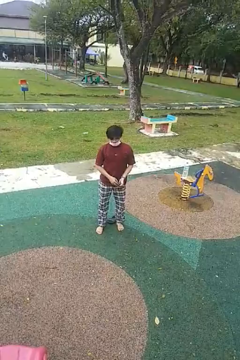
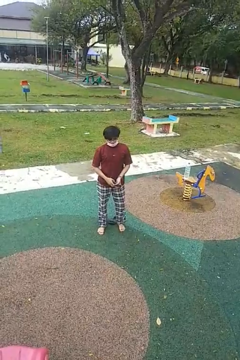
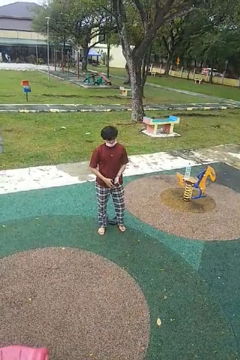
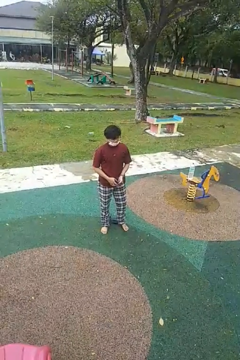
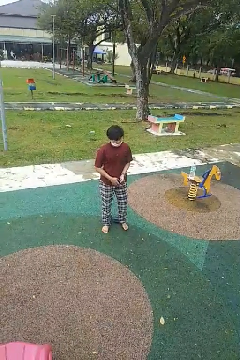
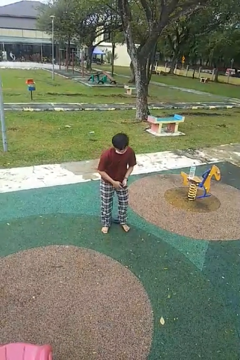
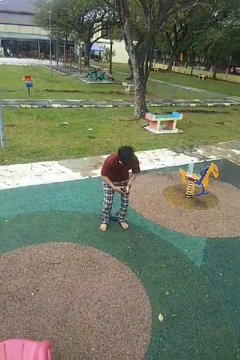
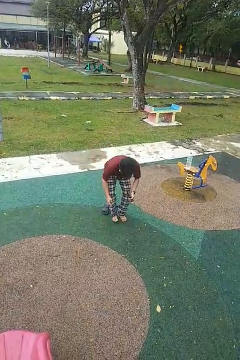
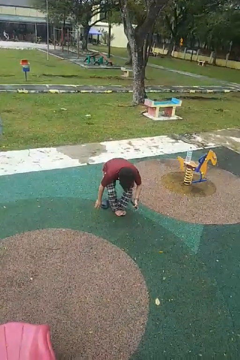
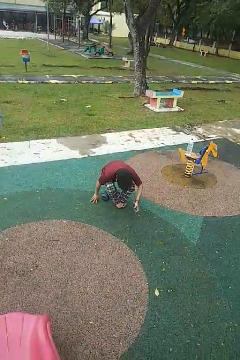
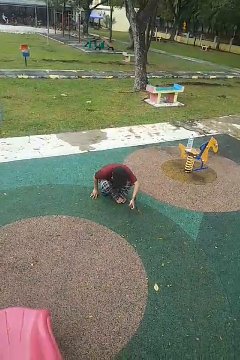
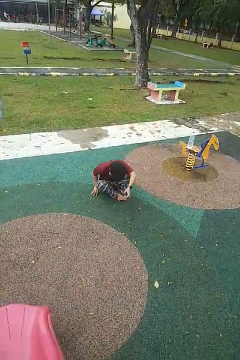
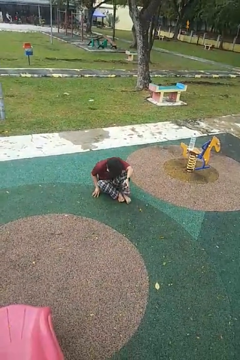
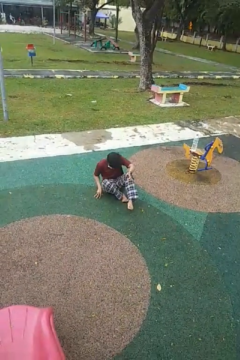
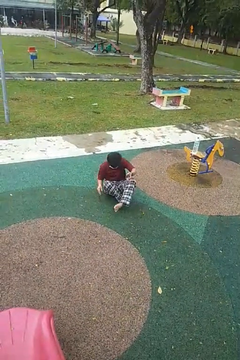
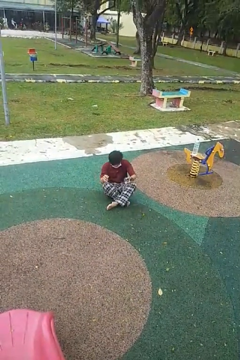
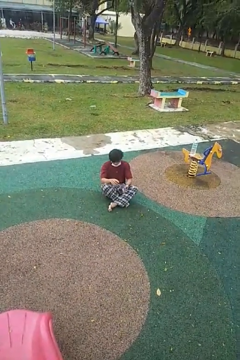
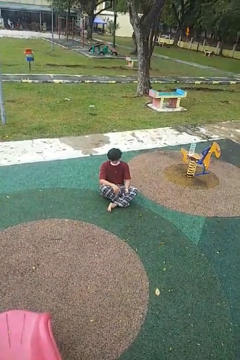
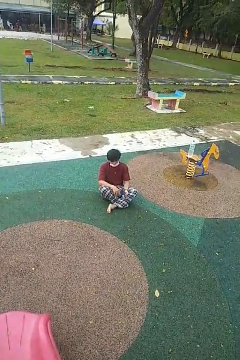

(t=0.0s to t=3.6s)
person sits crisscross

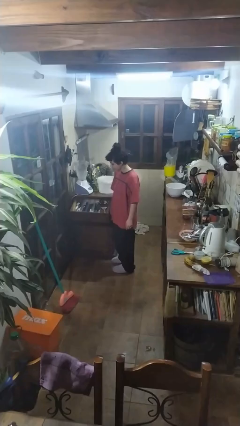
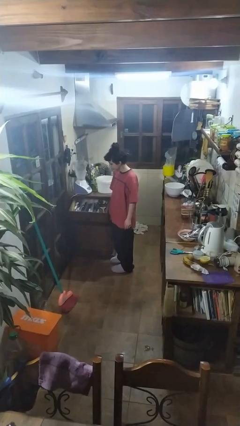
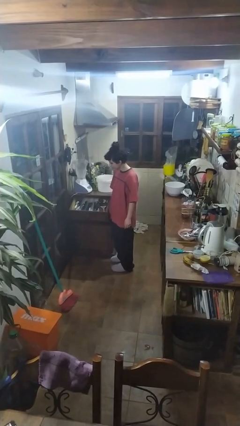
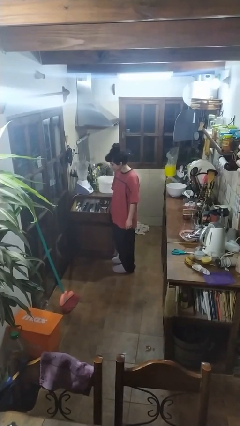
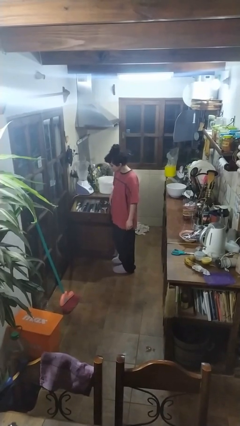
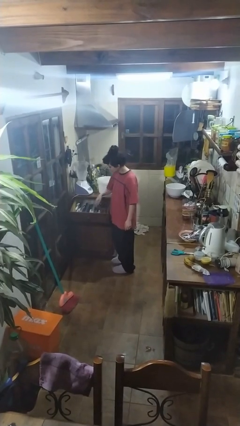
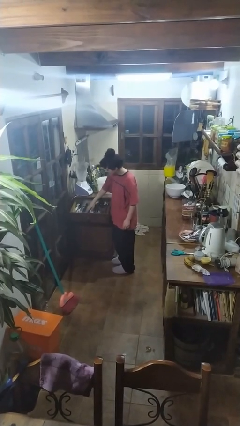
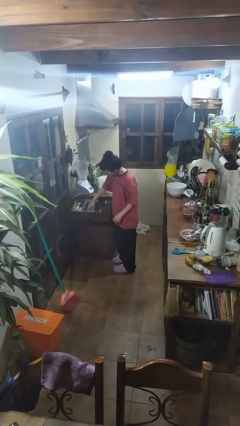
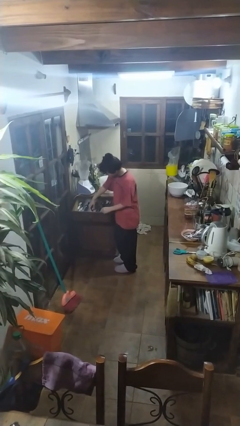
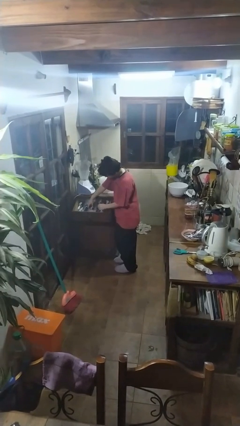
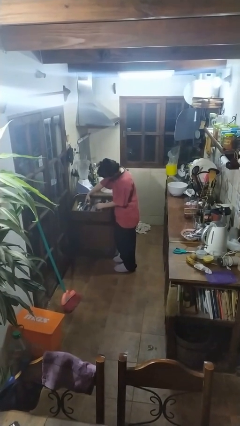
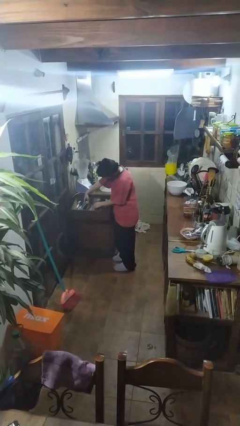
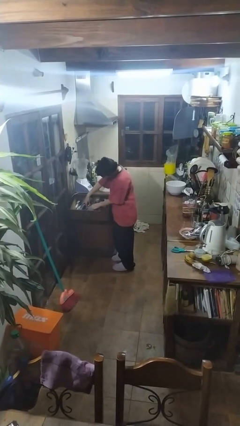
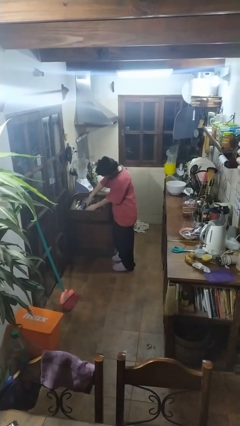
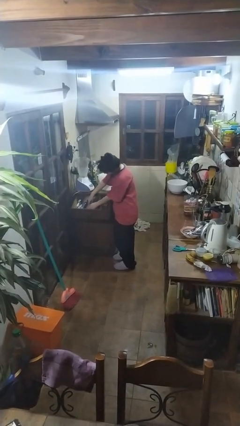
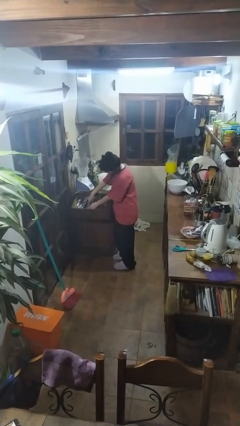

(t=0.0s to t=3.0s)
person searches in kitchen drawer

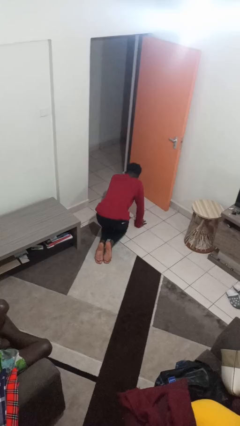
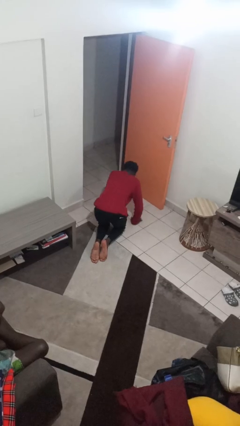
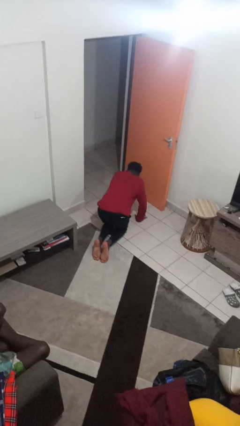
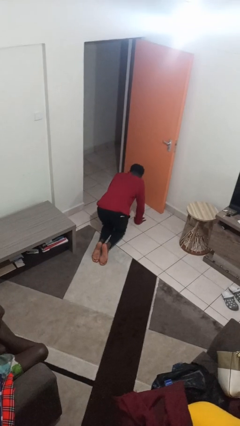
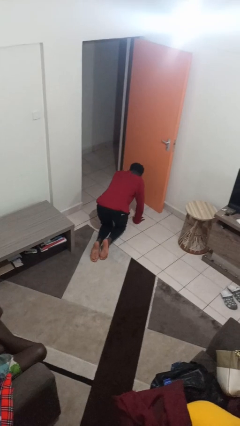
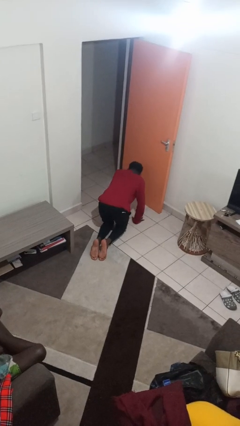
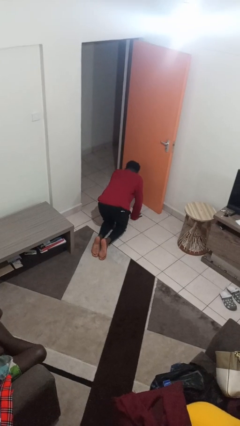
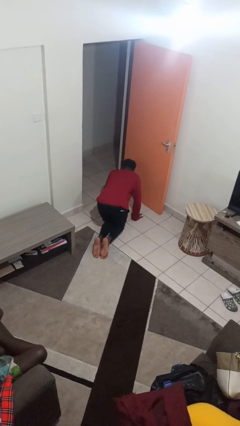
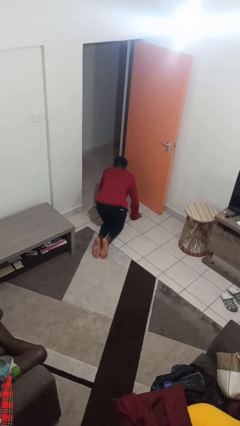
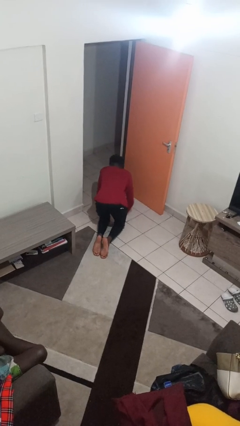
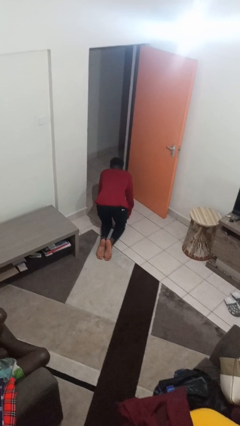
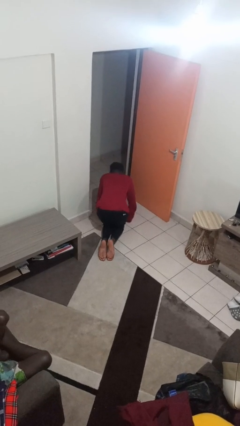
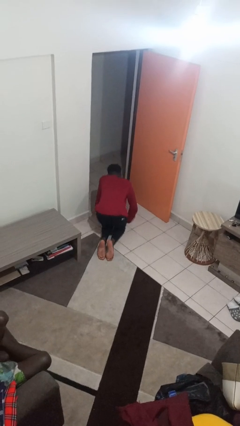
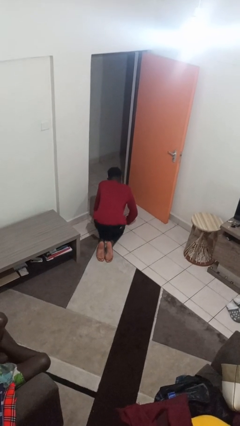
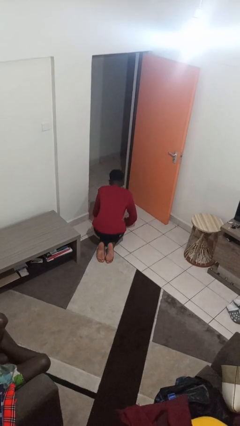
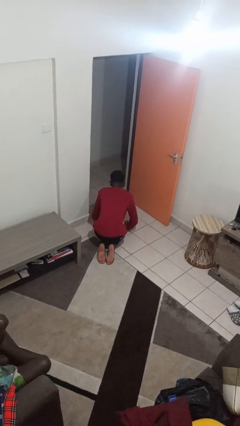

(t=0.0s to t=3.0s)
person crawls

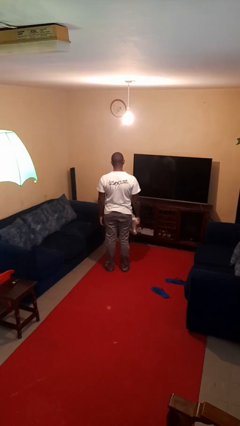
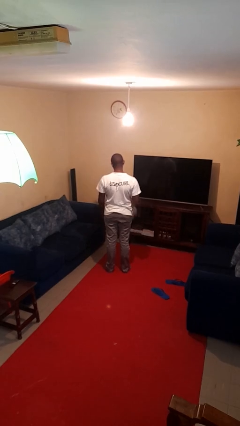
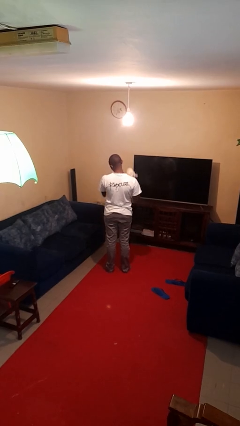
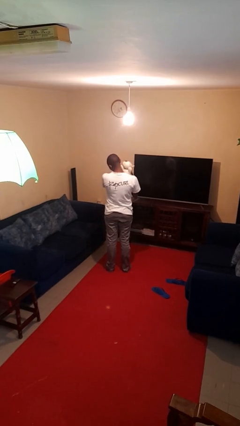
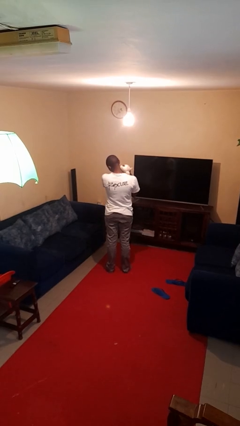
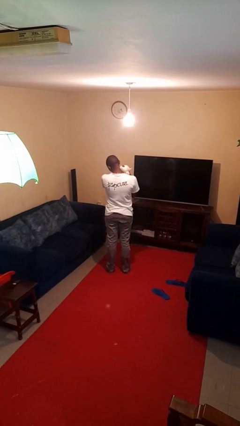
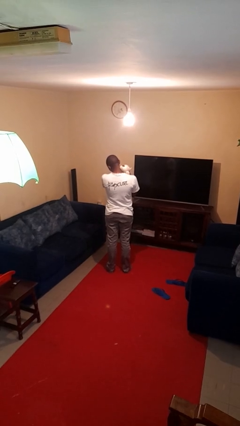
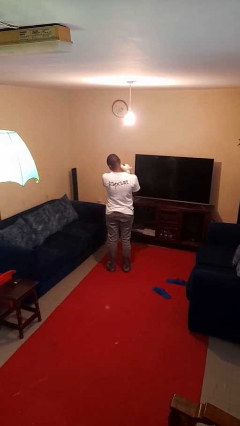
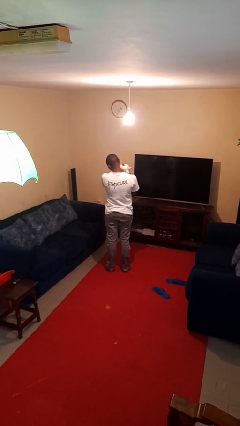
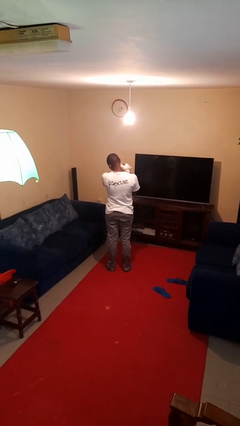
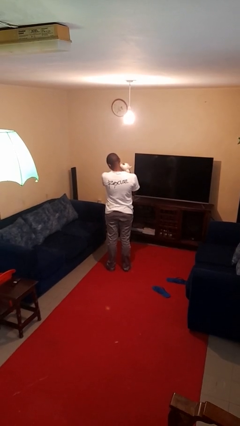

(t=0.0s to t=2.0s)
person hugs stuffed animal

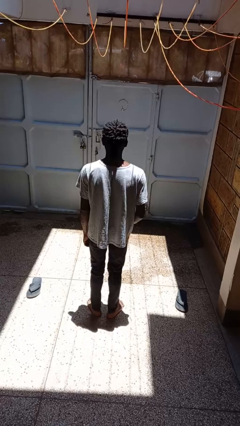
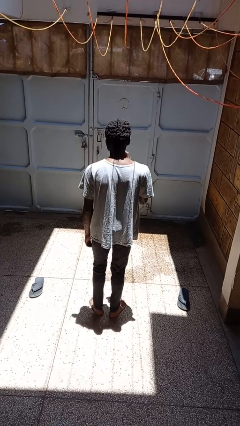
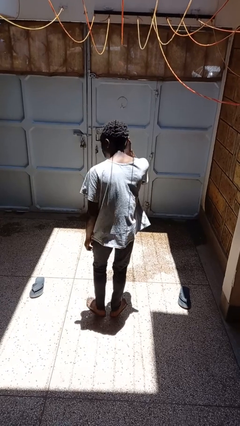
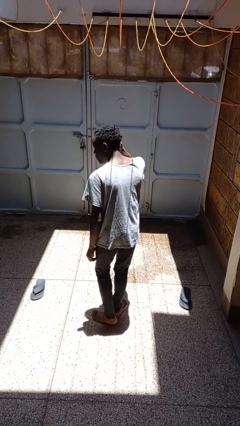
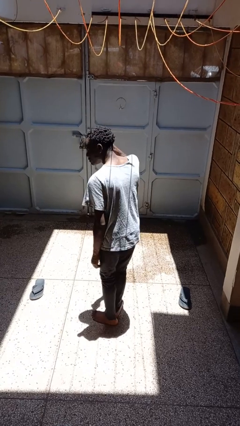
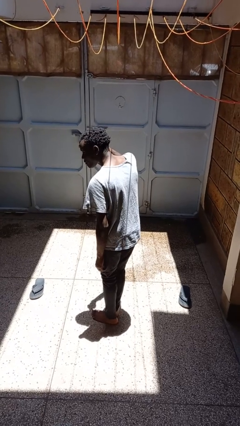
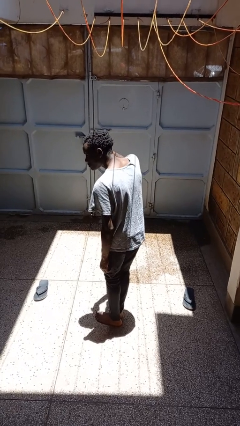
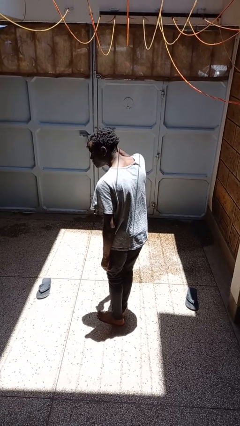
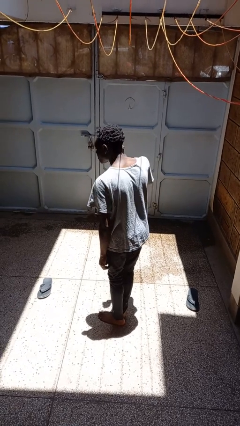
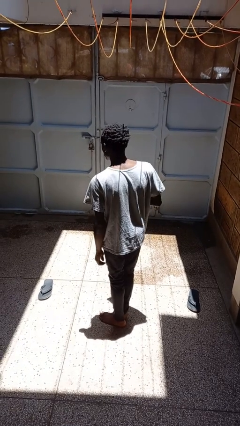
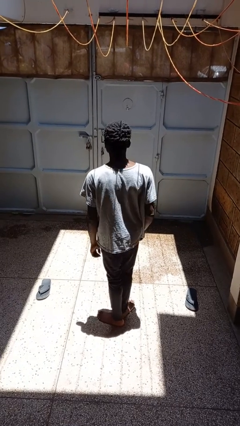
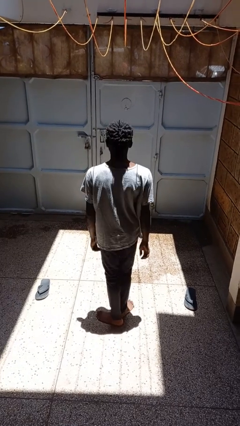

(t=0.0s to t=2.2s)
person touches earlobe

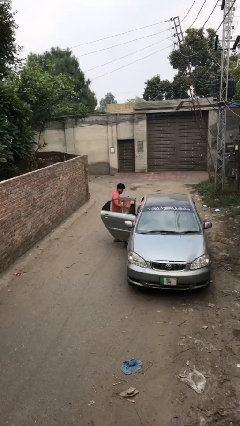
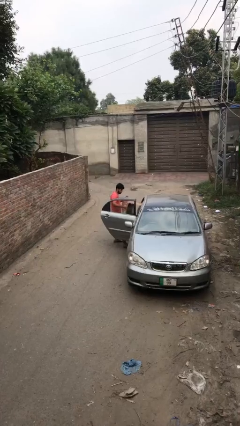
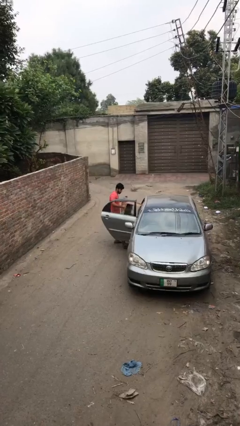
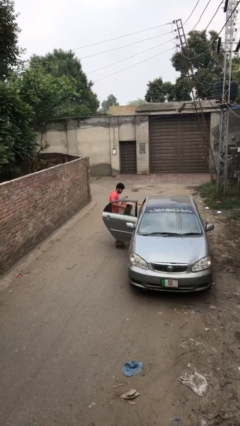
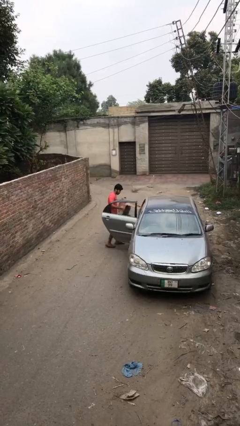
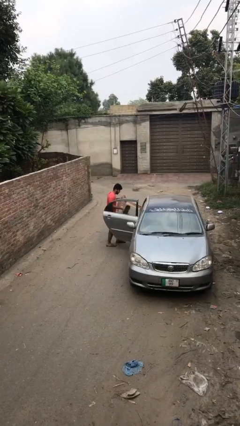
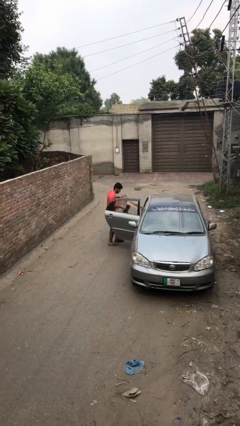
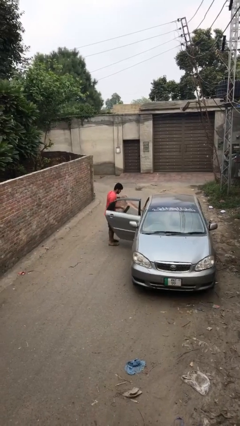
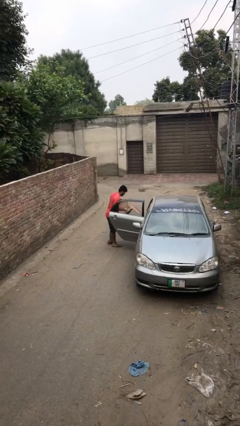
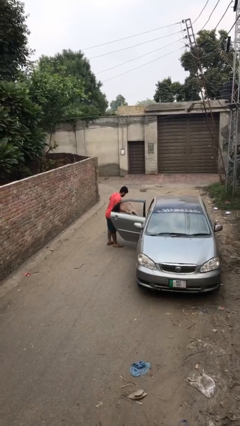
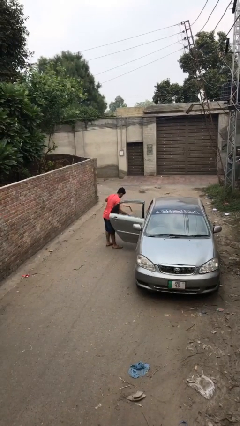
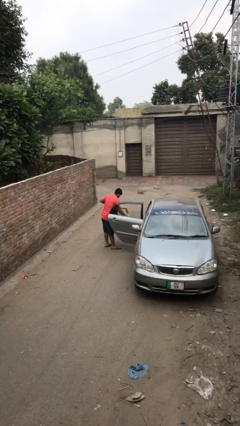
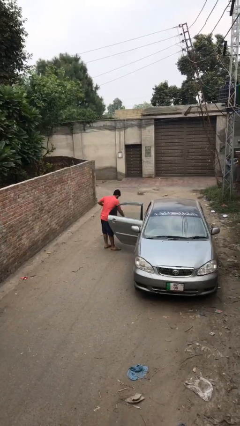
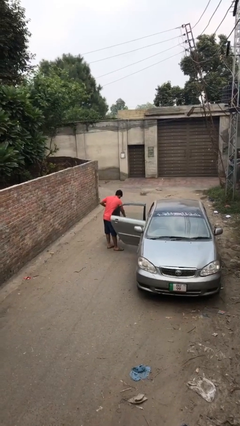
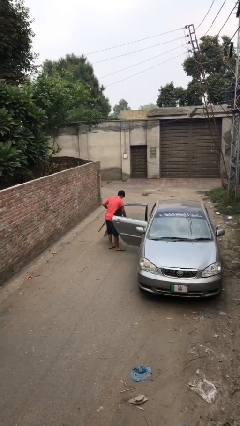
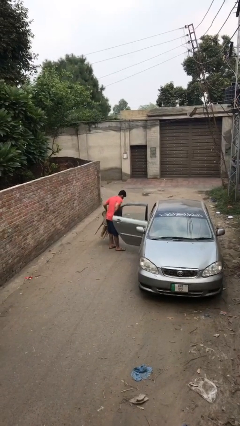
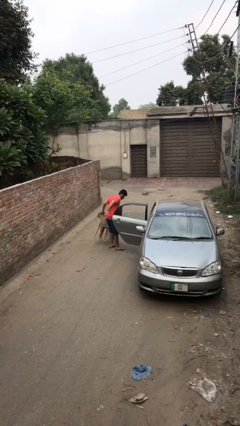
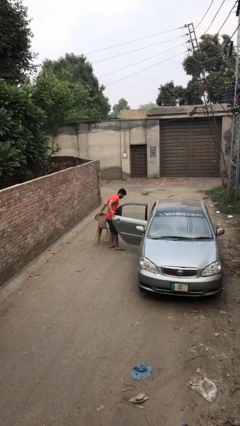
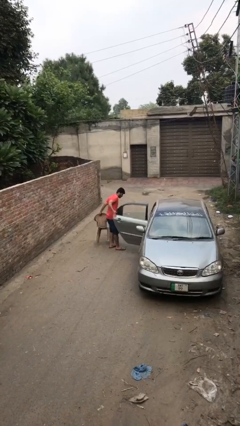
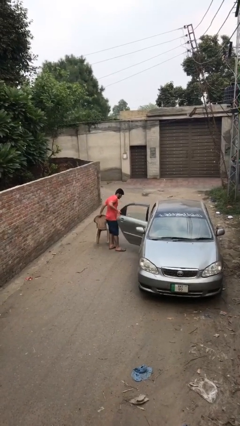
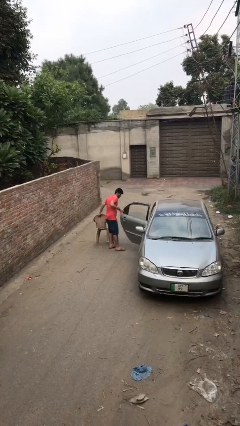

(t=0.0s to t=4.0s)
person unloads car

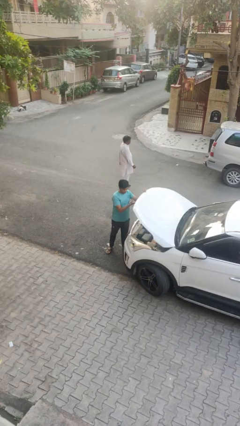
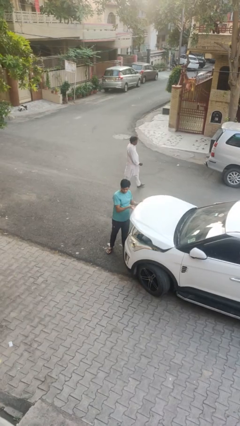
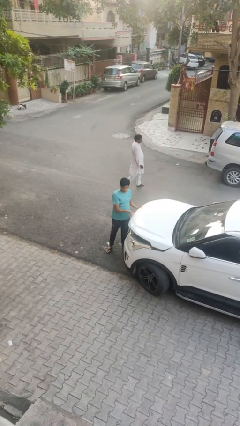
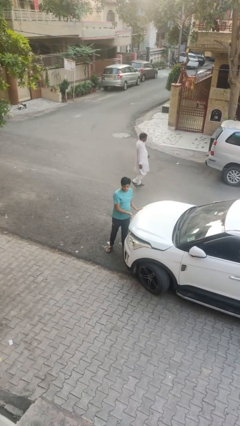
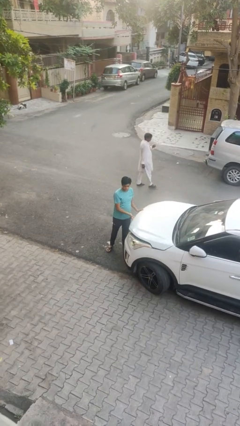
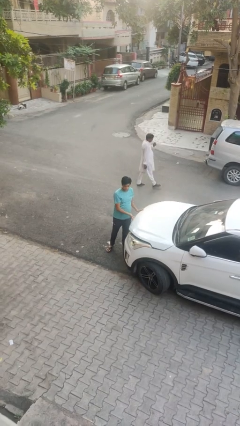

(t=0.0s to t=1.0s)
person closes car hood
